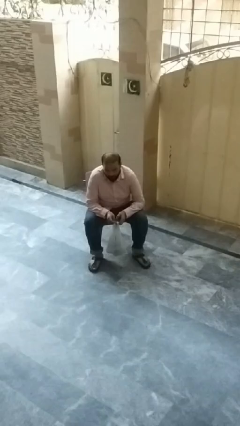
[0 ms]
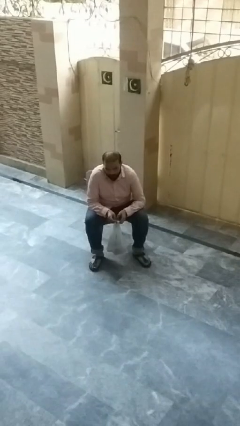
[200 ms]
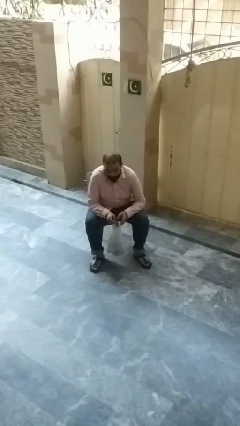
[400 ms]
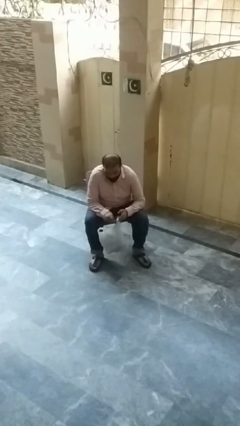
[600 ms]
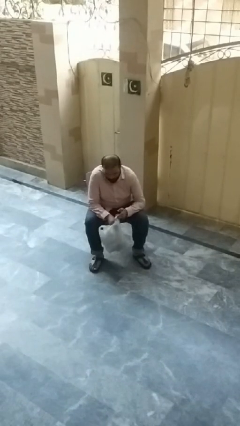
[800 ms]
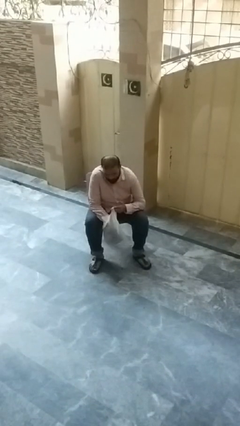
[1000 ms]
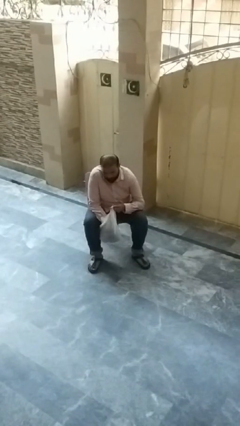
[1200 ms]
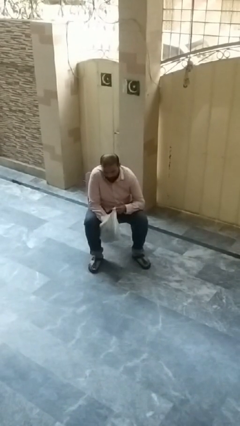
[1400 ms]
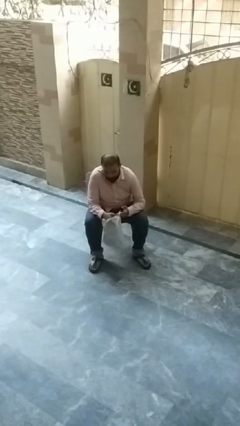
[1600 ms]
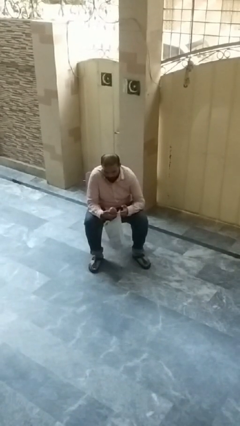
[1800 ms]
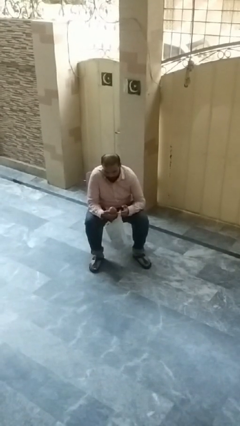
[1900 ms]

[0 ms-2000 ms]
person takes object from bag

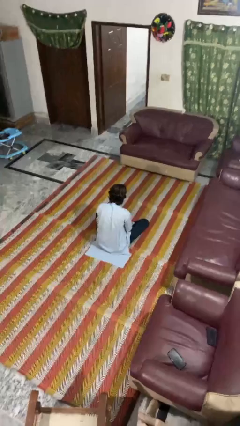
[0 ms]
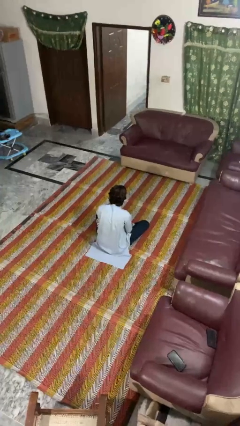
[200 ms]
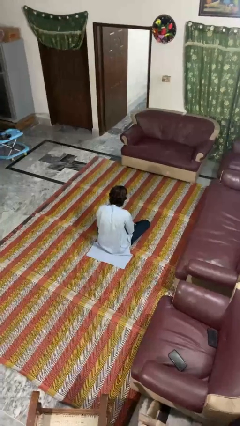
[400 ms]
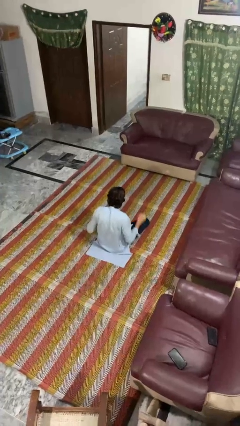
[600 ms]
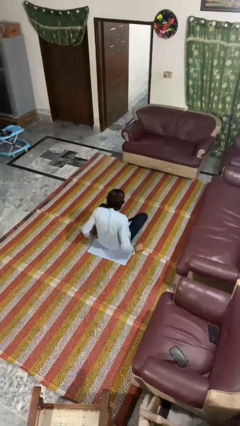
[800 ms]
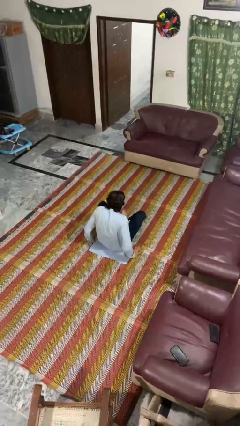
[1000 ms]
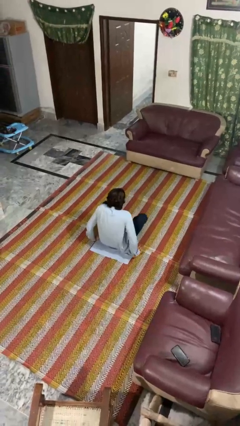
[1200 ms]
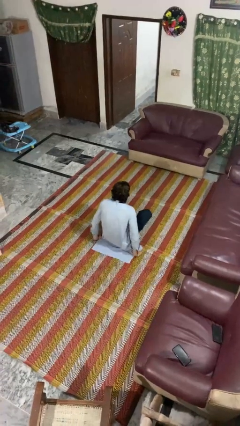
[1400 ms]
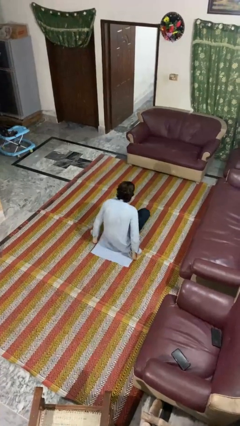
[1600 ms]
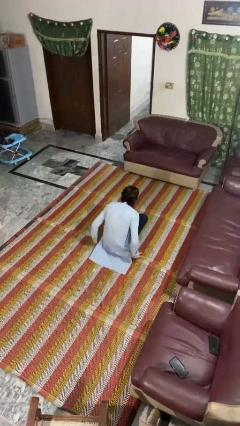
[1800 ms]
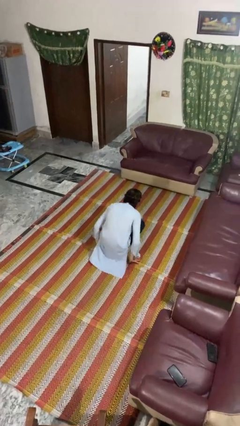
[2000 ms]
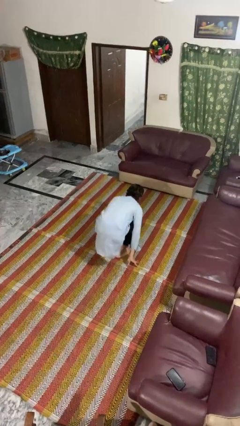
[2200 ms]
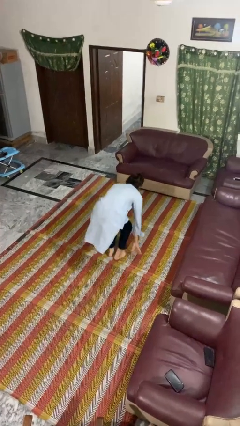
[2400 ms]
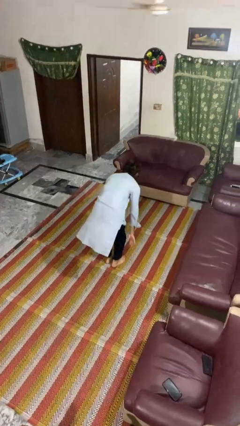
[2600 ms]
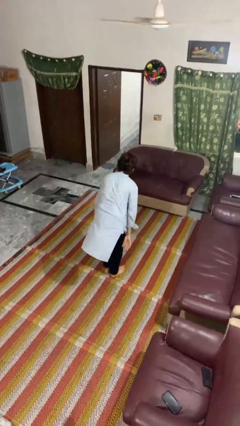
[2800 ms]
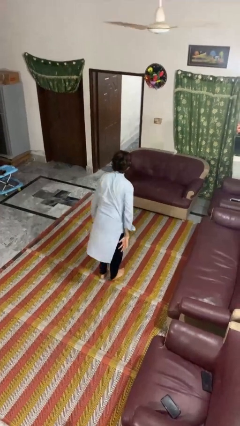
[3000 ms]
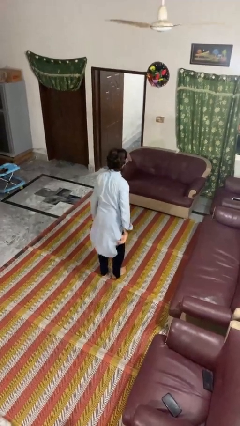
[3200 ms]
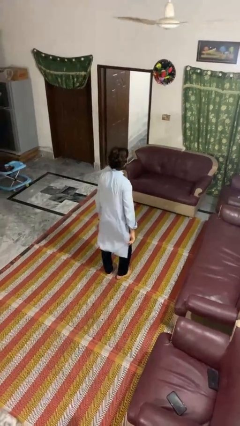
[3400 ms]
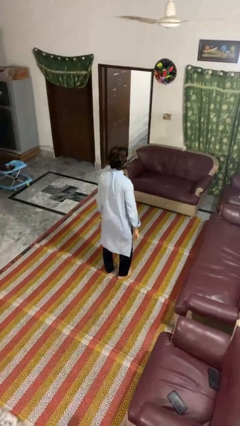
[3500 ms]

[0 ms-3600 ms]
person stands up from floor

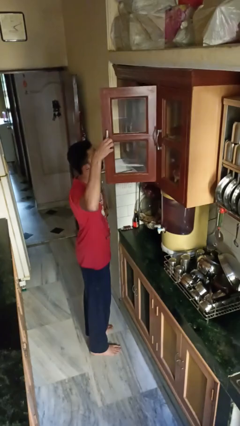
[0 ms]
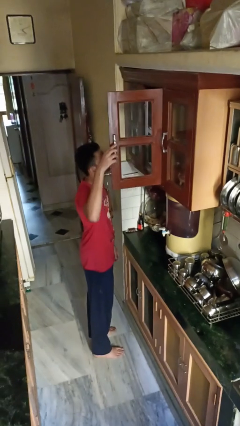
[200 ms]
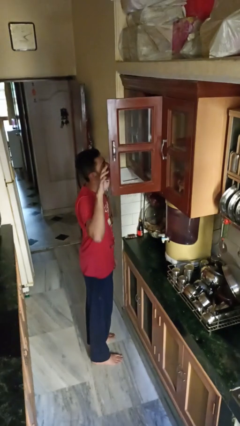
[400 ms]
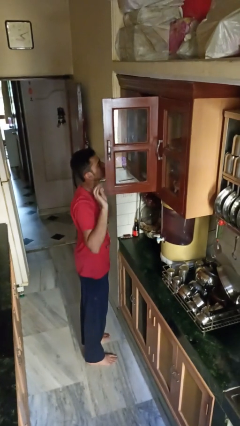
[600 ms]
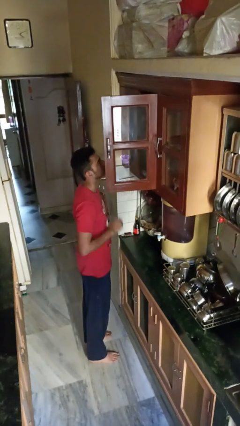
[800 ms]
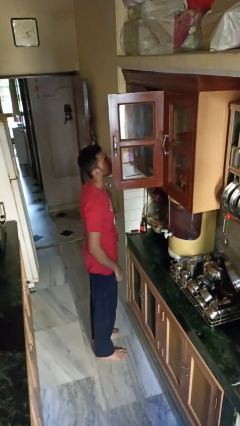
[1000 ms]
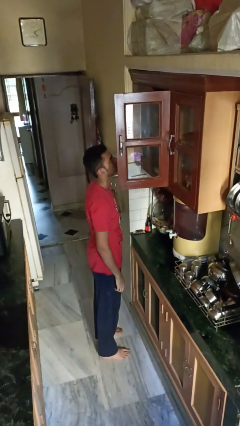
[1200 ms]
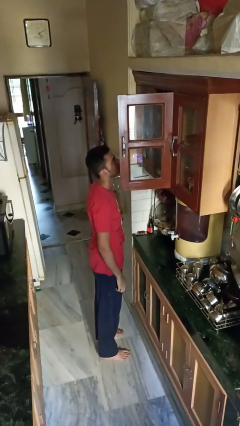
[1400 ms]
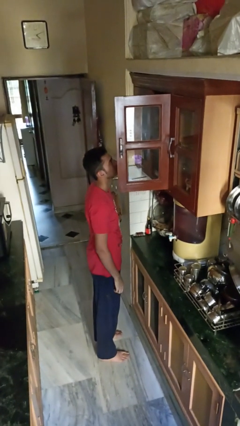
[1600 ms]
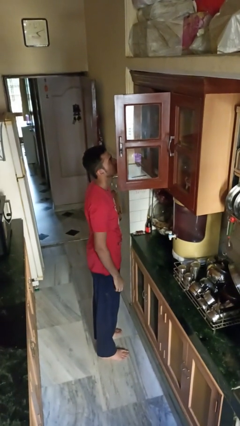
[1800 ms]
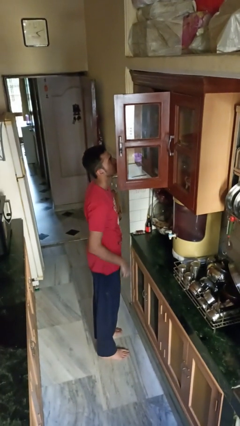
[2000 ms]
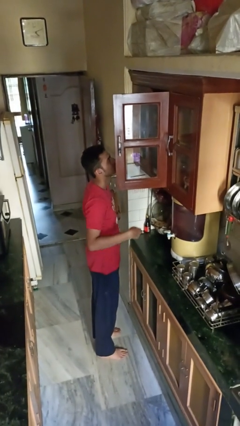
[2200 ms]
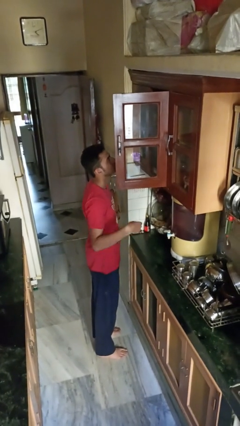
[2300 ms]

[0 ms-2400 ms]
person opens cabinet

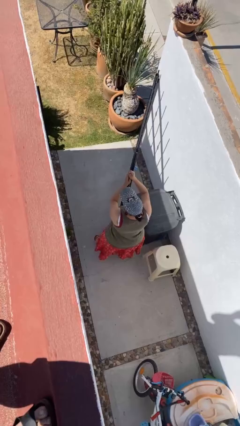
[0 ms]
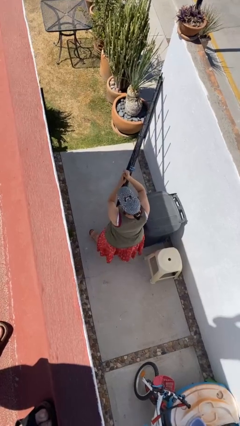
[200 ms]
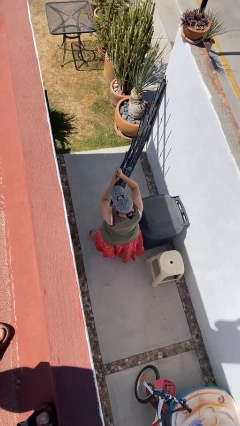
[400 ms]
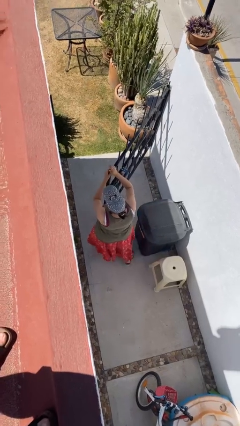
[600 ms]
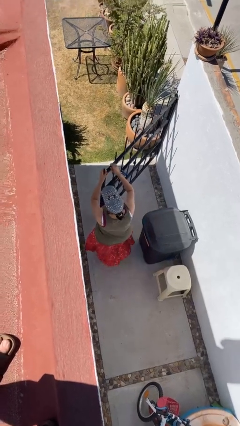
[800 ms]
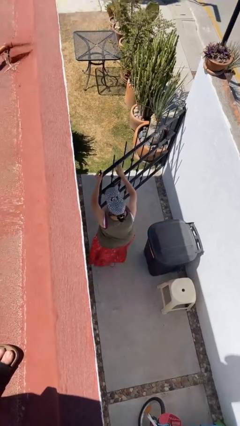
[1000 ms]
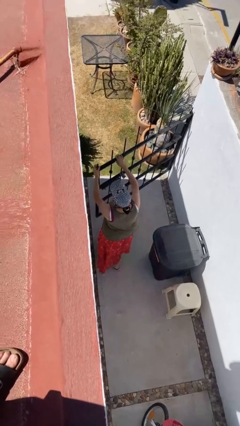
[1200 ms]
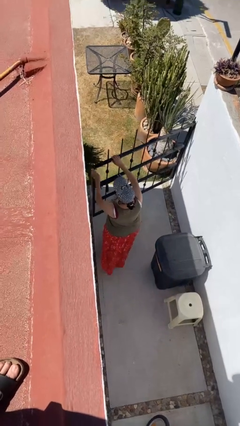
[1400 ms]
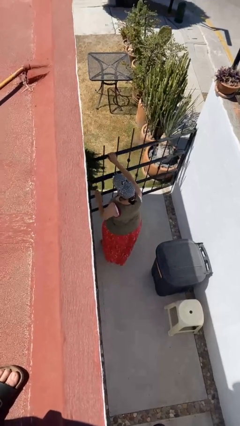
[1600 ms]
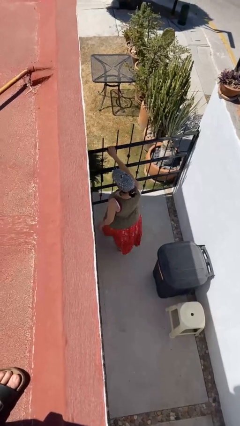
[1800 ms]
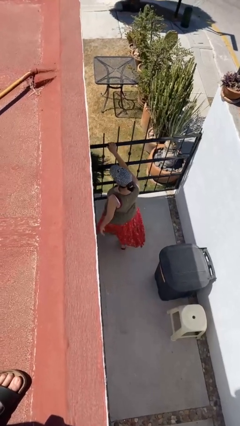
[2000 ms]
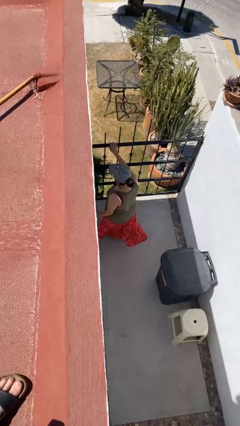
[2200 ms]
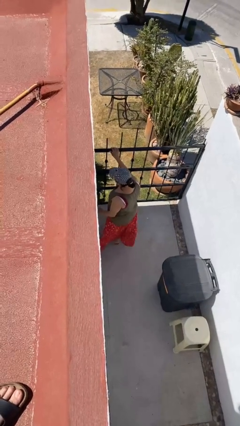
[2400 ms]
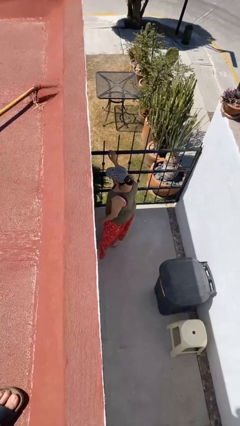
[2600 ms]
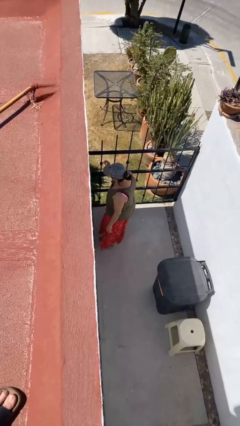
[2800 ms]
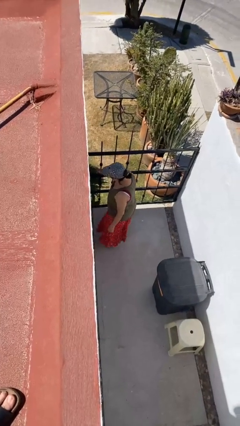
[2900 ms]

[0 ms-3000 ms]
person closes facility door

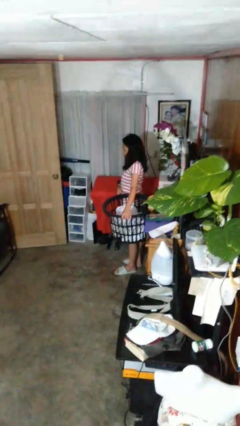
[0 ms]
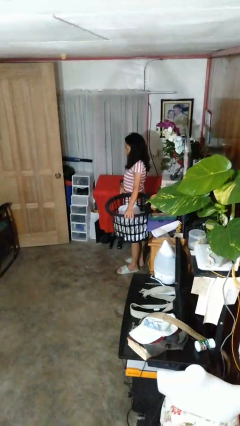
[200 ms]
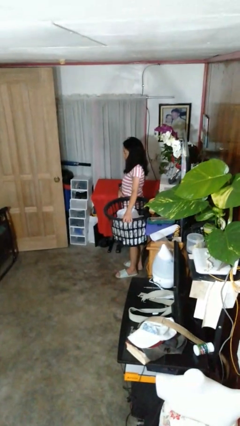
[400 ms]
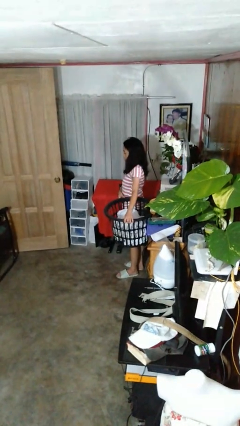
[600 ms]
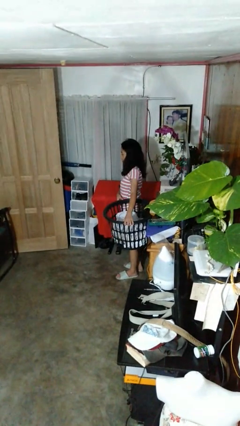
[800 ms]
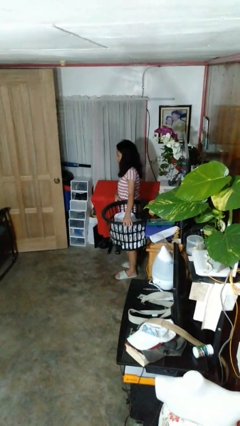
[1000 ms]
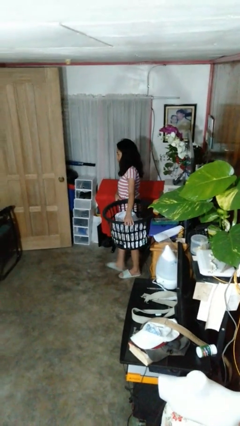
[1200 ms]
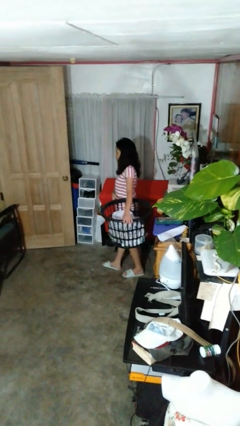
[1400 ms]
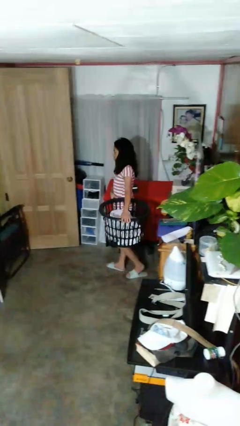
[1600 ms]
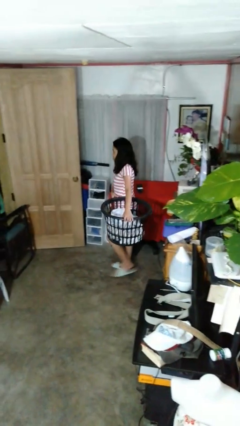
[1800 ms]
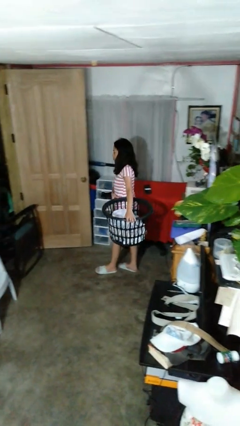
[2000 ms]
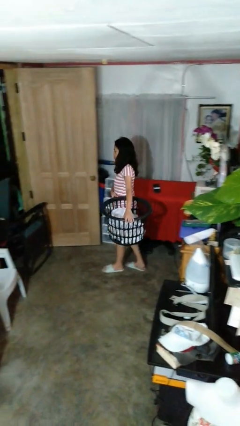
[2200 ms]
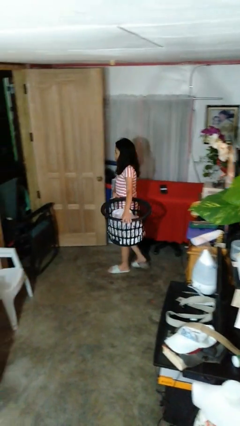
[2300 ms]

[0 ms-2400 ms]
person carries laundry basket

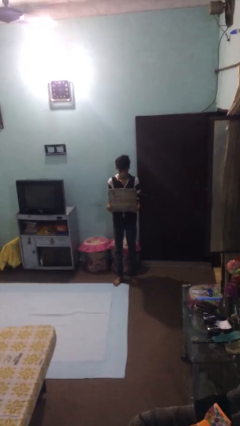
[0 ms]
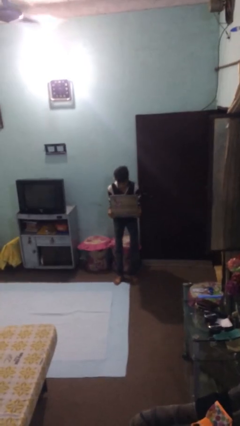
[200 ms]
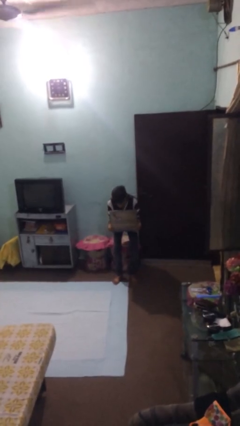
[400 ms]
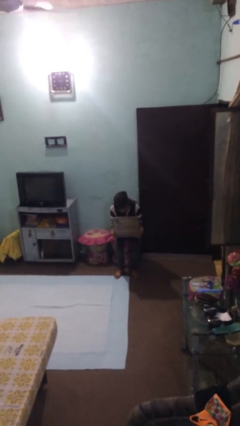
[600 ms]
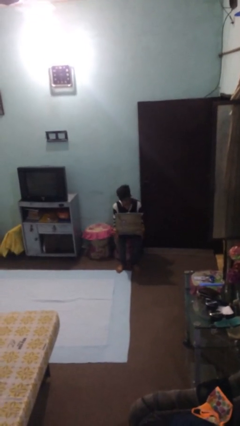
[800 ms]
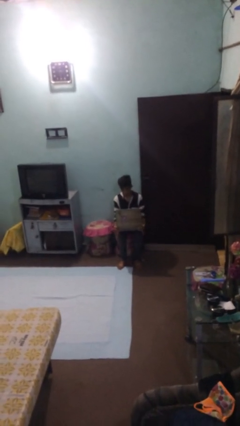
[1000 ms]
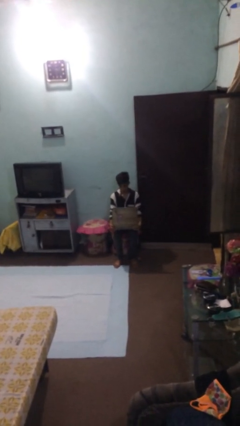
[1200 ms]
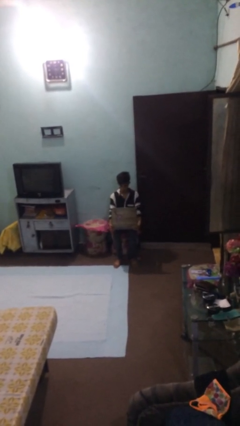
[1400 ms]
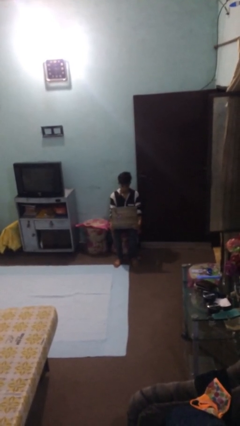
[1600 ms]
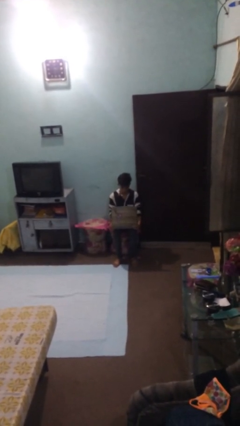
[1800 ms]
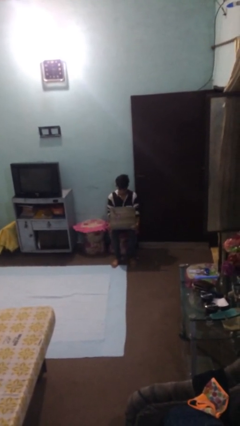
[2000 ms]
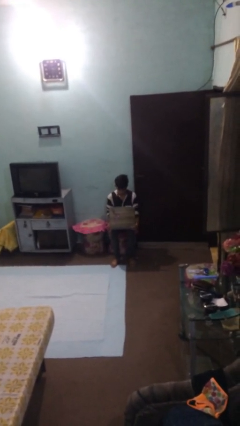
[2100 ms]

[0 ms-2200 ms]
person sits down

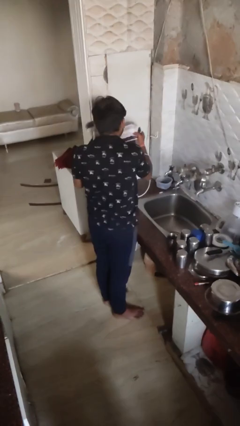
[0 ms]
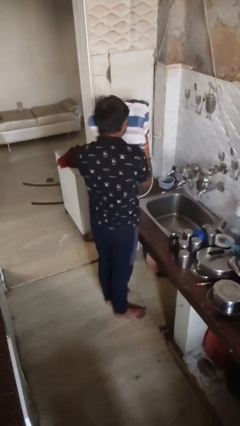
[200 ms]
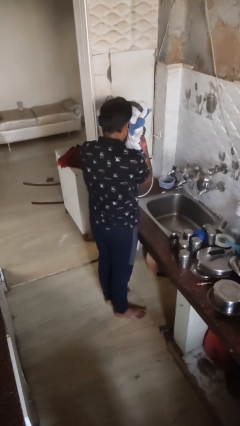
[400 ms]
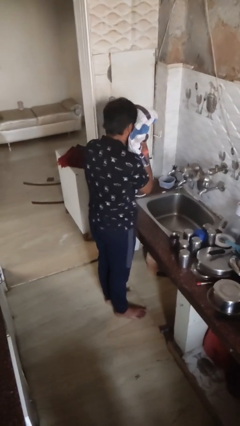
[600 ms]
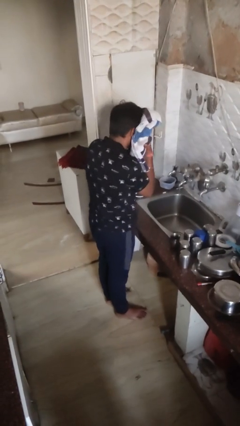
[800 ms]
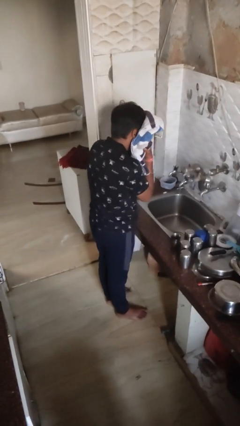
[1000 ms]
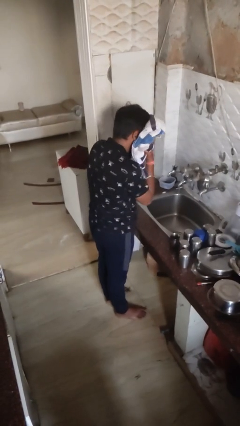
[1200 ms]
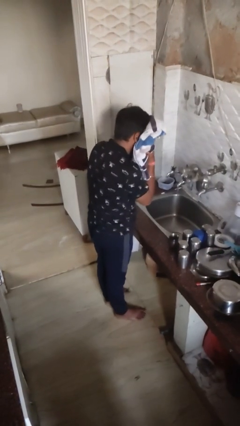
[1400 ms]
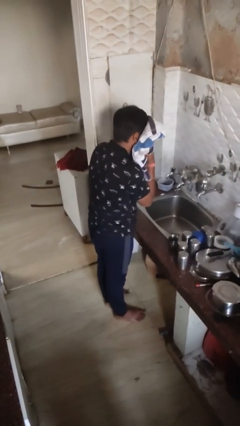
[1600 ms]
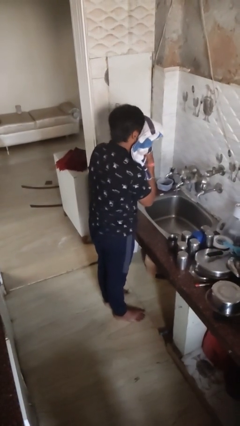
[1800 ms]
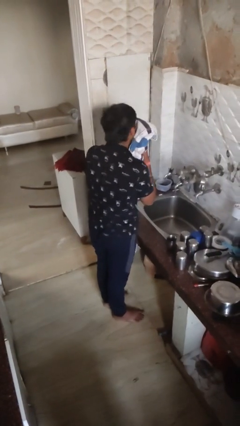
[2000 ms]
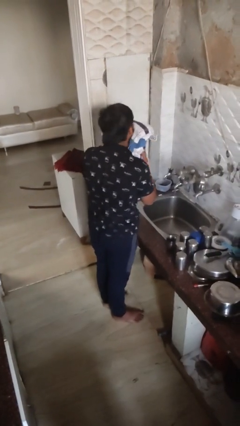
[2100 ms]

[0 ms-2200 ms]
person dries face with towel
